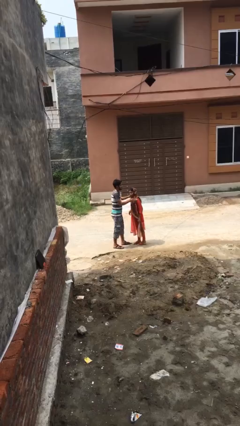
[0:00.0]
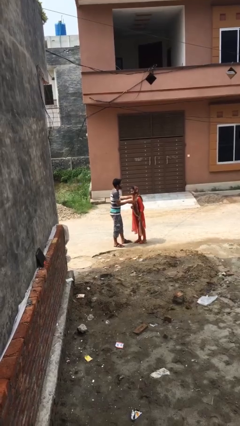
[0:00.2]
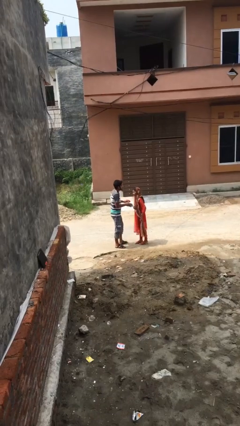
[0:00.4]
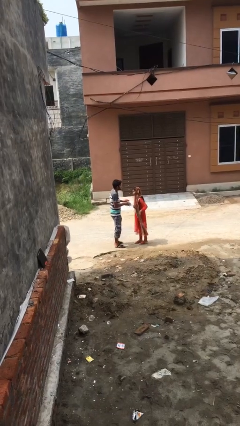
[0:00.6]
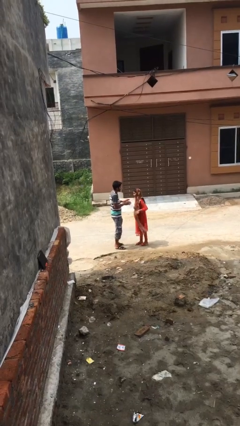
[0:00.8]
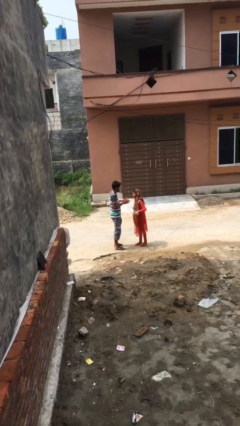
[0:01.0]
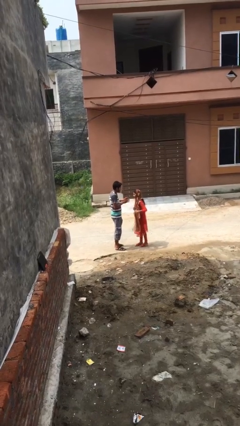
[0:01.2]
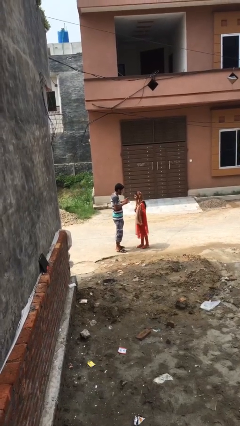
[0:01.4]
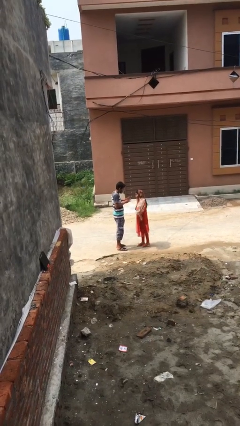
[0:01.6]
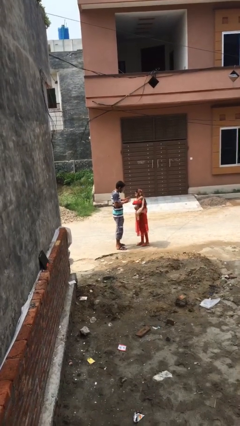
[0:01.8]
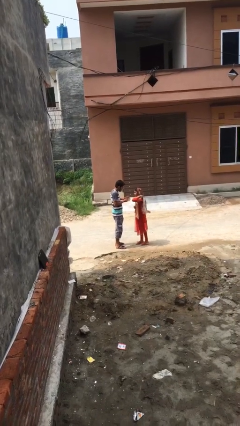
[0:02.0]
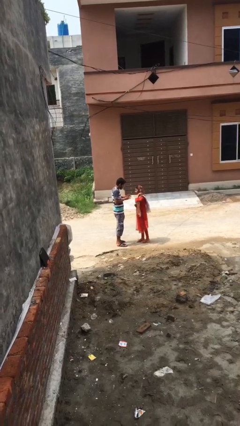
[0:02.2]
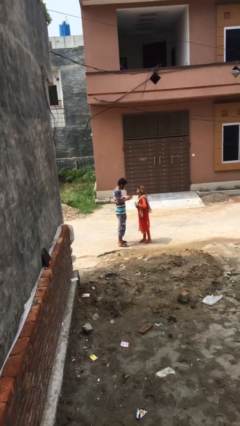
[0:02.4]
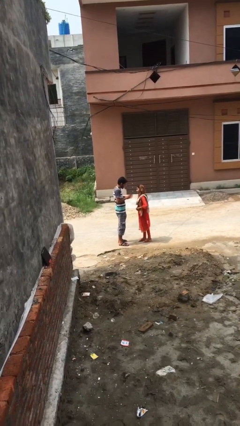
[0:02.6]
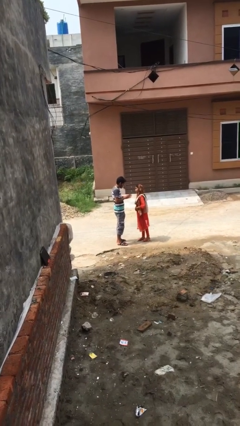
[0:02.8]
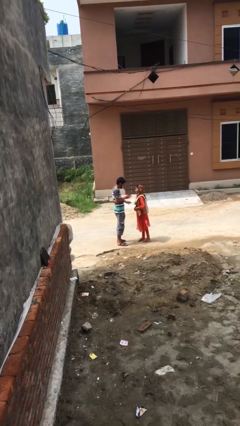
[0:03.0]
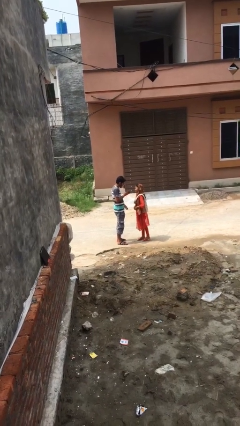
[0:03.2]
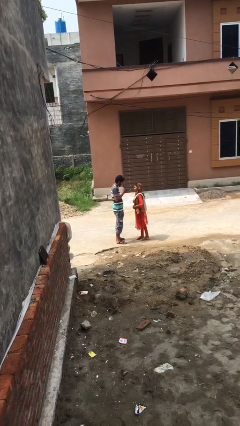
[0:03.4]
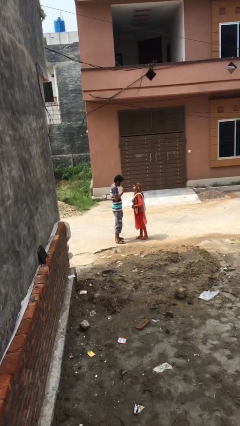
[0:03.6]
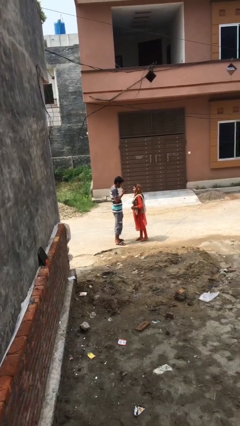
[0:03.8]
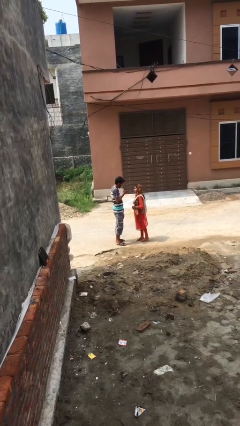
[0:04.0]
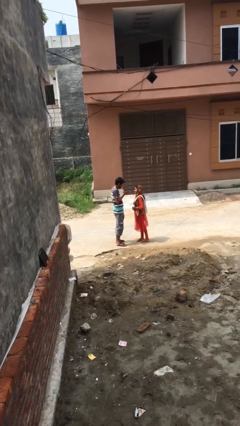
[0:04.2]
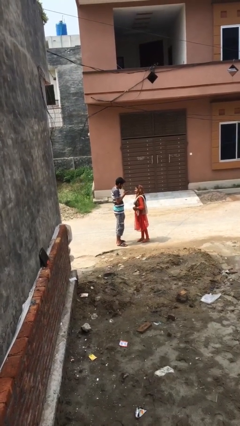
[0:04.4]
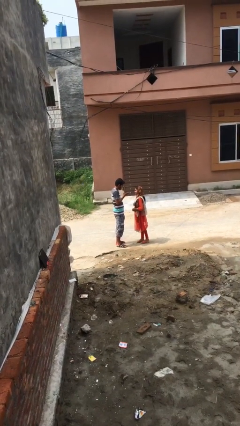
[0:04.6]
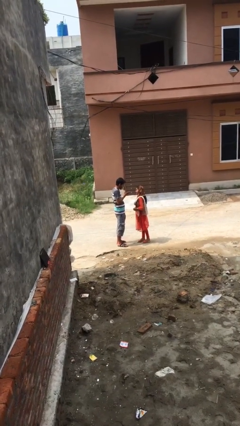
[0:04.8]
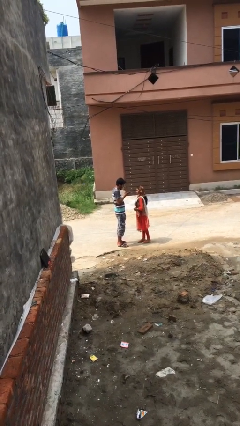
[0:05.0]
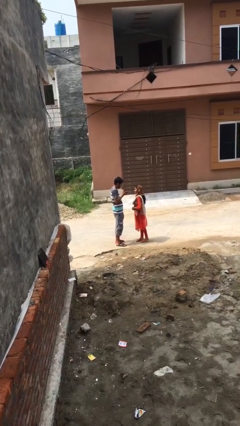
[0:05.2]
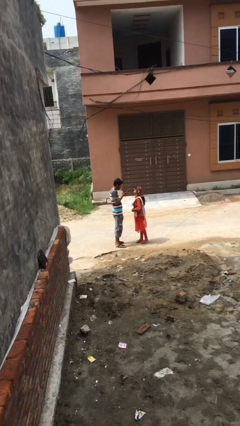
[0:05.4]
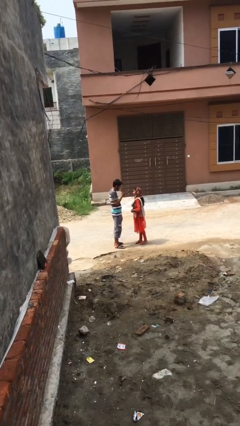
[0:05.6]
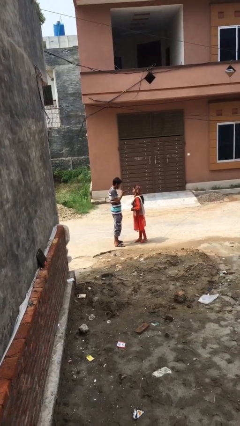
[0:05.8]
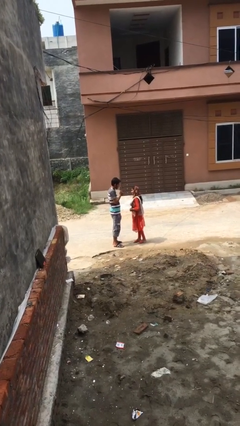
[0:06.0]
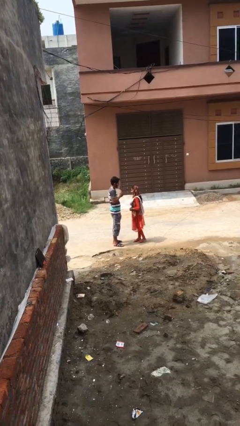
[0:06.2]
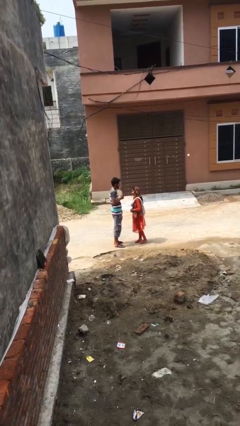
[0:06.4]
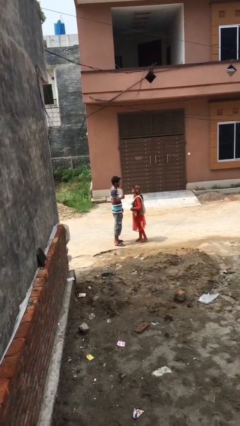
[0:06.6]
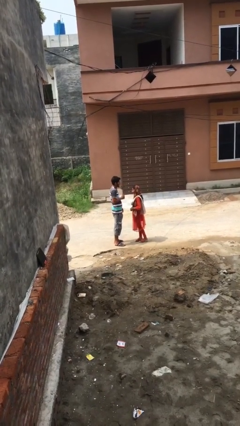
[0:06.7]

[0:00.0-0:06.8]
person talks to person

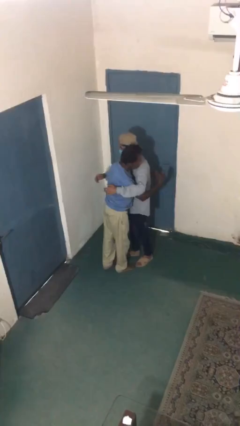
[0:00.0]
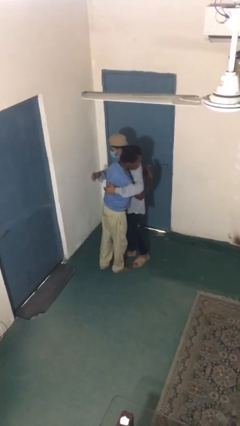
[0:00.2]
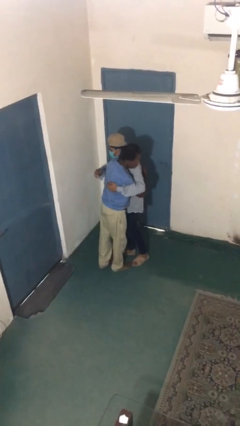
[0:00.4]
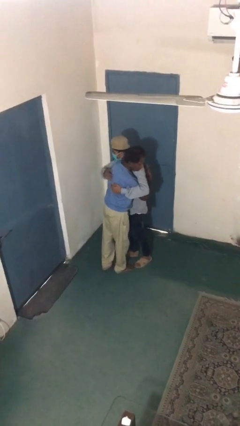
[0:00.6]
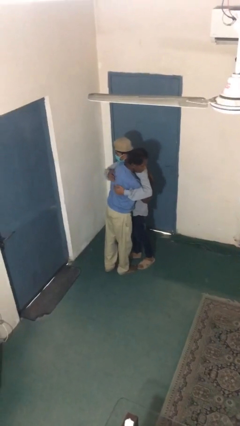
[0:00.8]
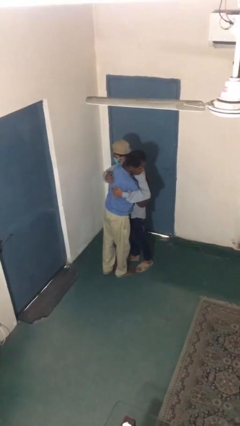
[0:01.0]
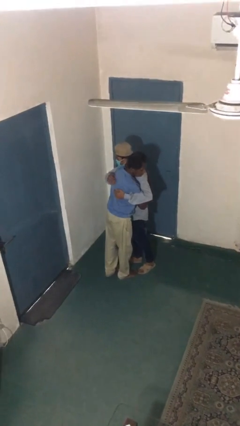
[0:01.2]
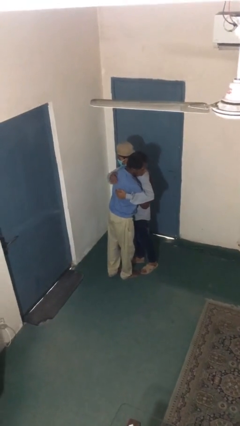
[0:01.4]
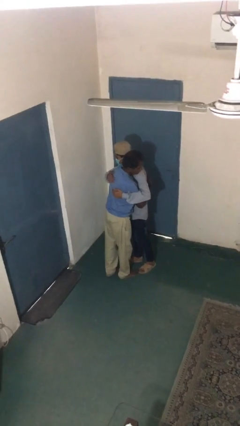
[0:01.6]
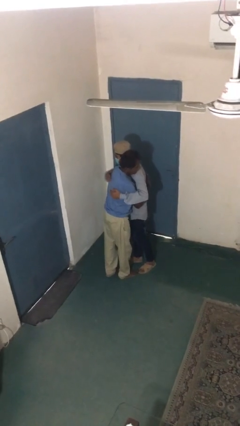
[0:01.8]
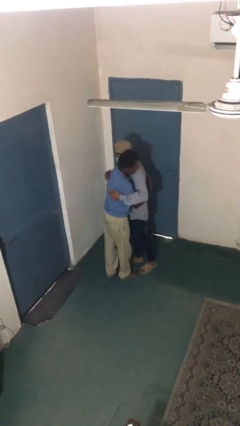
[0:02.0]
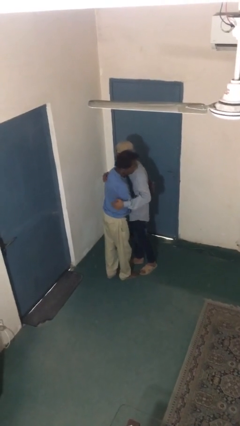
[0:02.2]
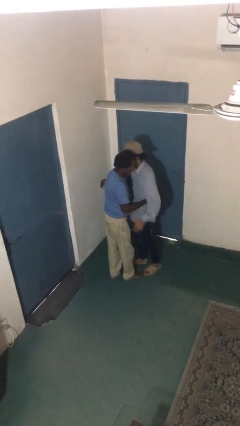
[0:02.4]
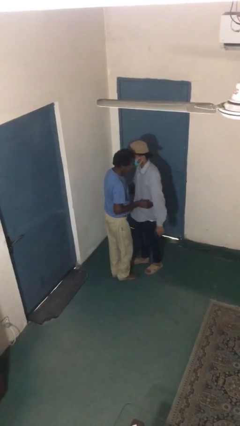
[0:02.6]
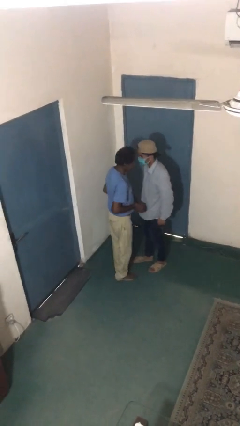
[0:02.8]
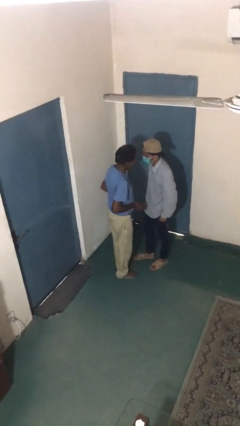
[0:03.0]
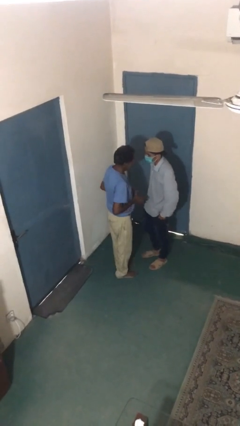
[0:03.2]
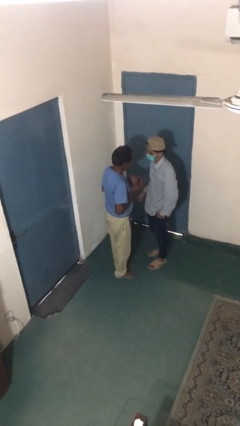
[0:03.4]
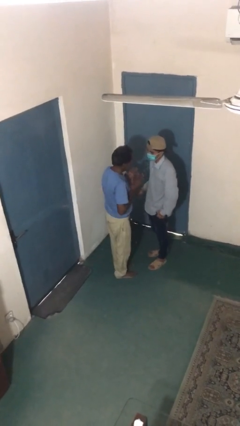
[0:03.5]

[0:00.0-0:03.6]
person embraces person

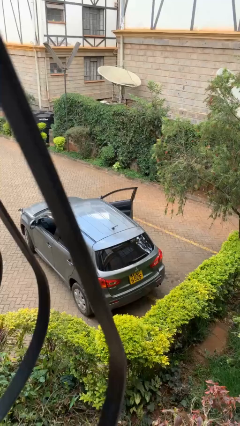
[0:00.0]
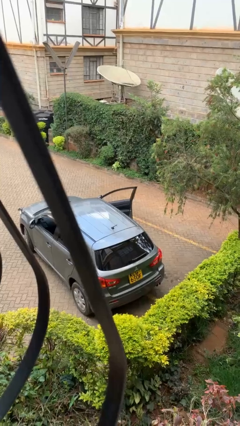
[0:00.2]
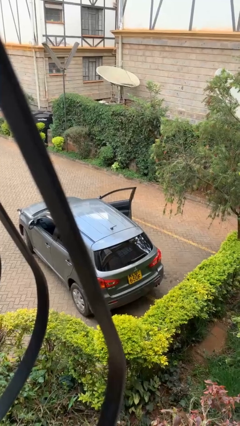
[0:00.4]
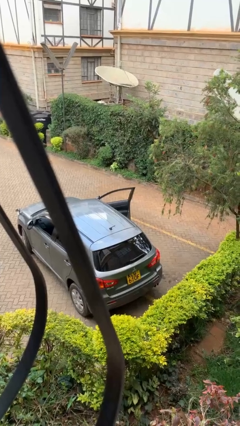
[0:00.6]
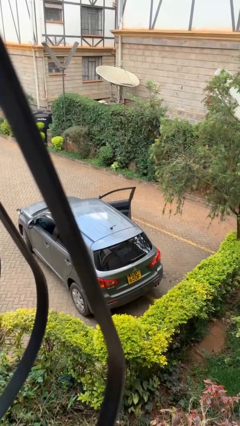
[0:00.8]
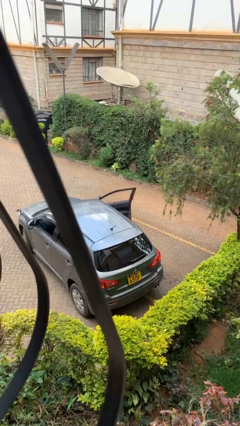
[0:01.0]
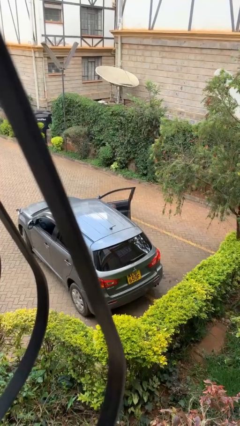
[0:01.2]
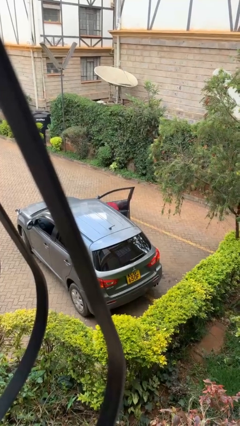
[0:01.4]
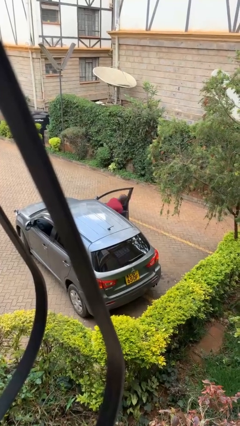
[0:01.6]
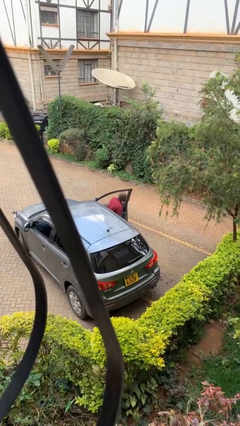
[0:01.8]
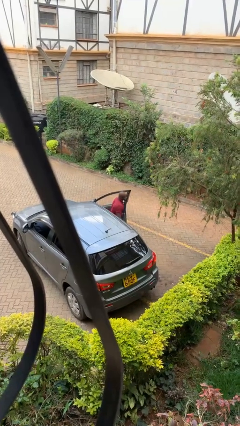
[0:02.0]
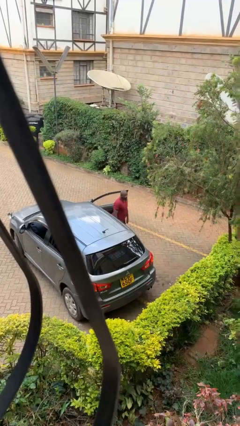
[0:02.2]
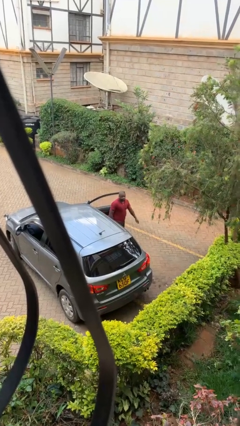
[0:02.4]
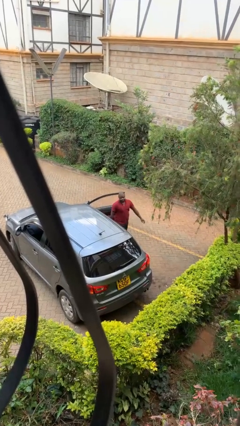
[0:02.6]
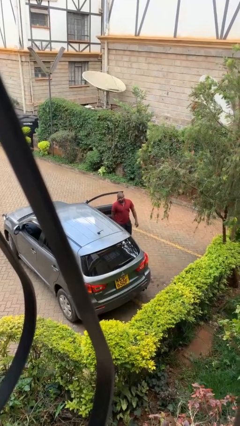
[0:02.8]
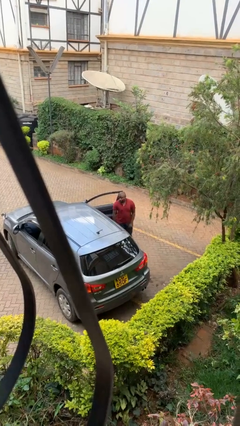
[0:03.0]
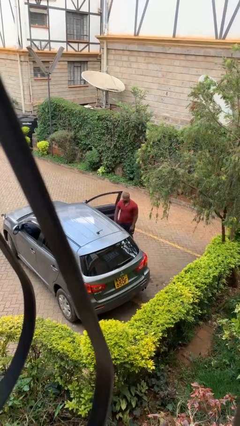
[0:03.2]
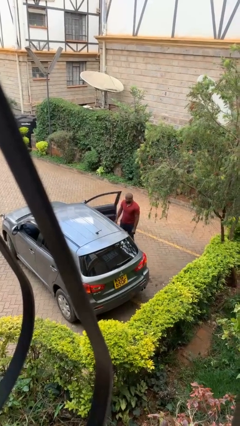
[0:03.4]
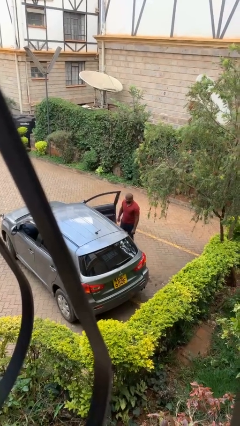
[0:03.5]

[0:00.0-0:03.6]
person exits car

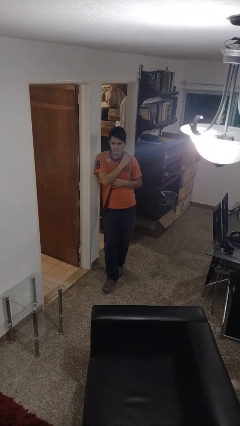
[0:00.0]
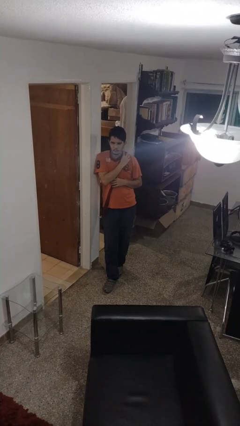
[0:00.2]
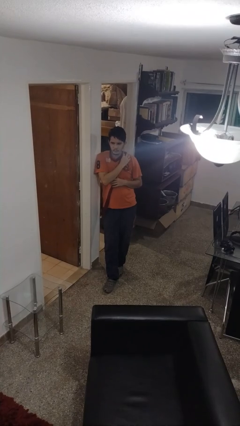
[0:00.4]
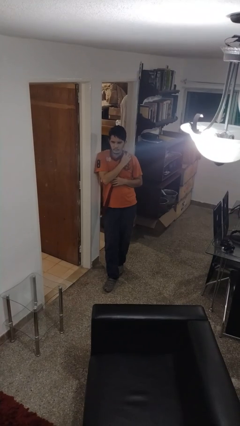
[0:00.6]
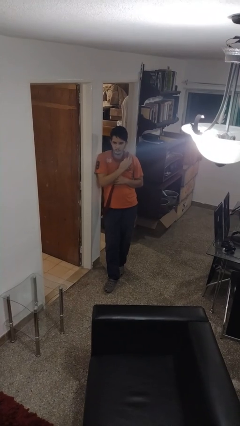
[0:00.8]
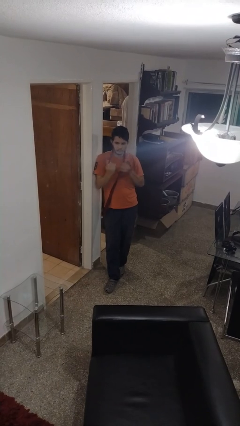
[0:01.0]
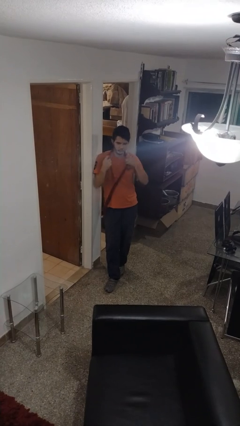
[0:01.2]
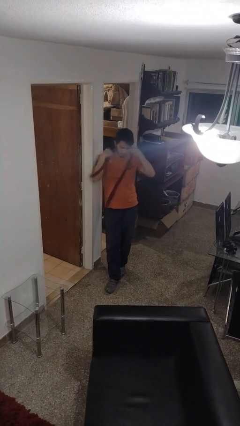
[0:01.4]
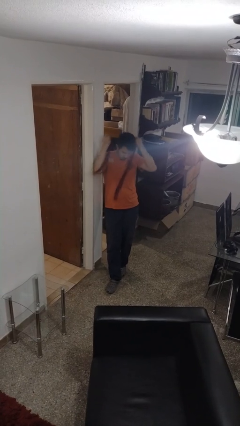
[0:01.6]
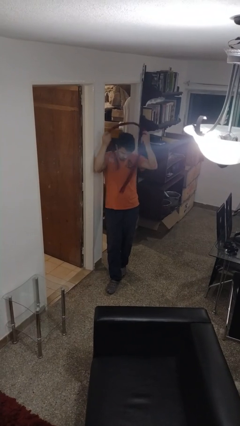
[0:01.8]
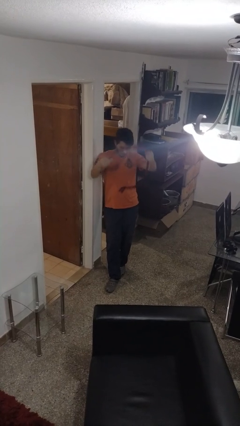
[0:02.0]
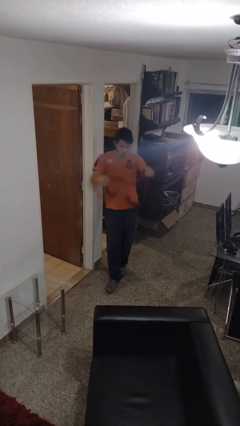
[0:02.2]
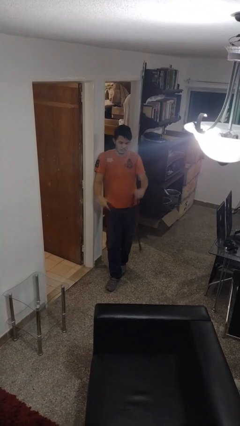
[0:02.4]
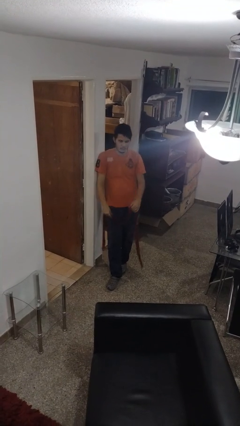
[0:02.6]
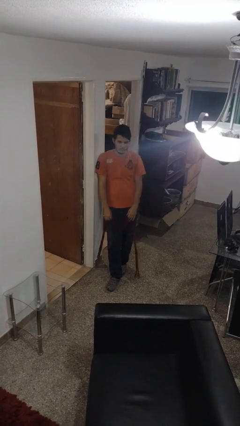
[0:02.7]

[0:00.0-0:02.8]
person takes off scarf

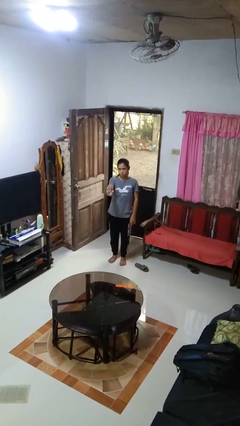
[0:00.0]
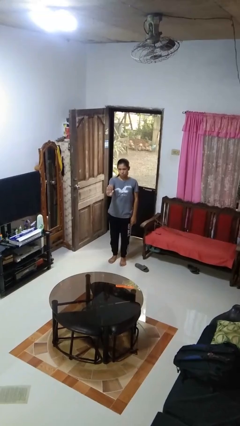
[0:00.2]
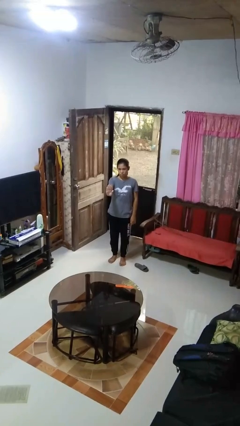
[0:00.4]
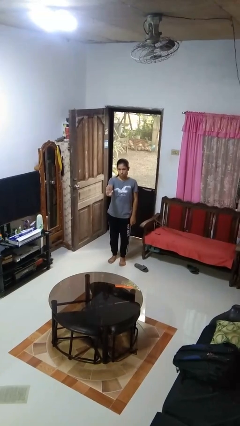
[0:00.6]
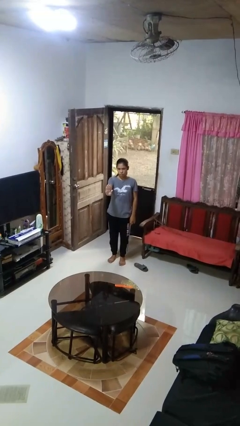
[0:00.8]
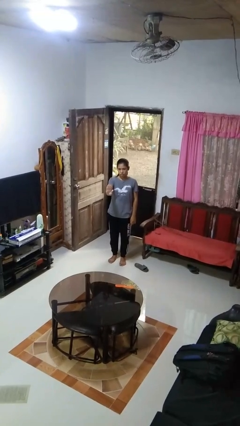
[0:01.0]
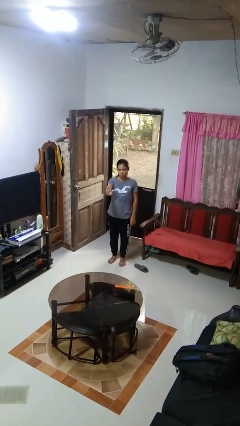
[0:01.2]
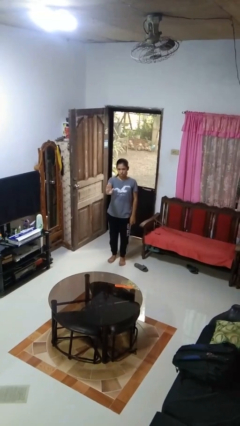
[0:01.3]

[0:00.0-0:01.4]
person gestures stop
